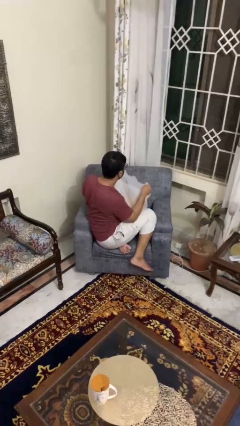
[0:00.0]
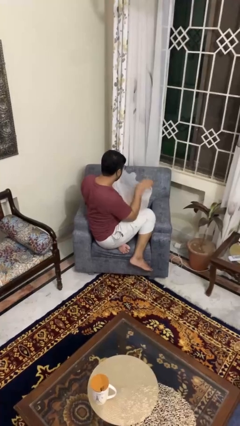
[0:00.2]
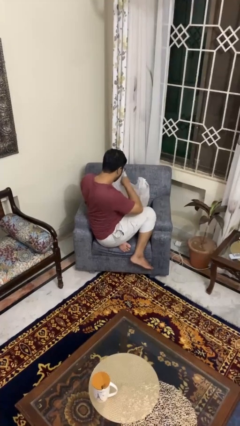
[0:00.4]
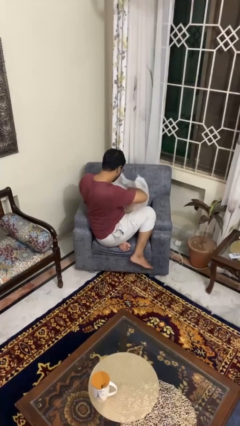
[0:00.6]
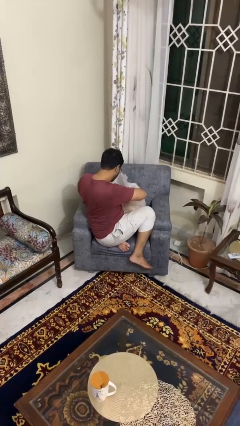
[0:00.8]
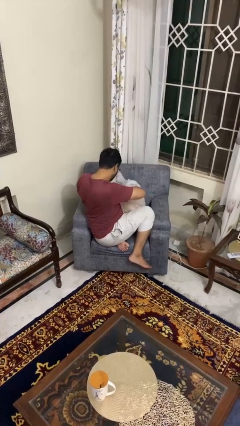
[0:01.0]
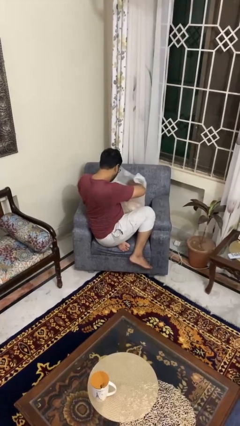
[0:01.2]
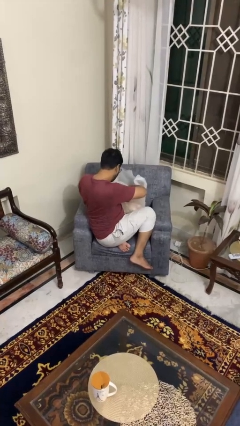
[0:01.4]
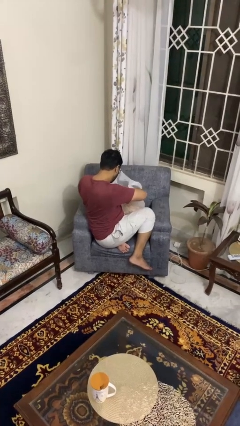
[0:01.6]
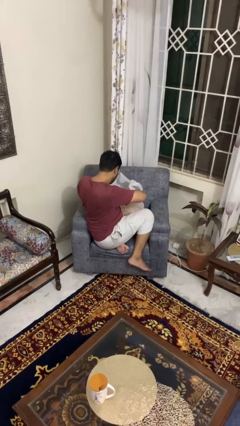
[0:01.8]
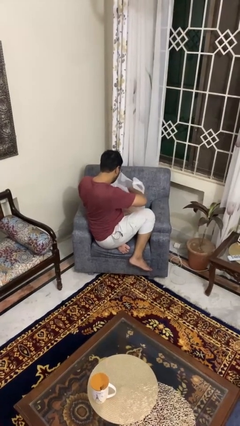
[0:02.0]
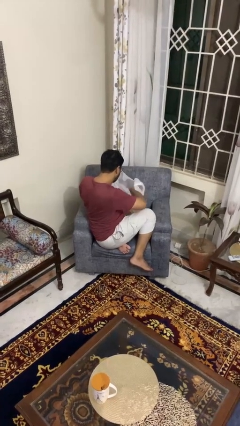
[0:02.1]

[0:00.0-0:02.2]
person searches in bag

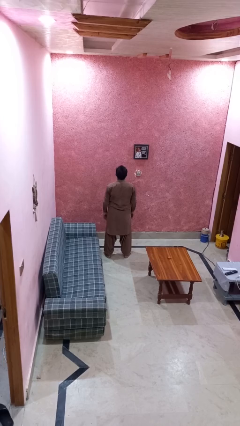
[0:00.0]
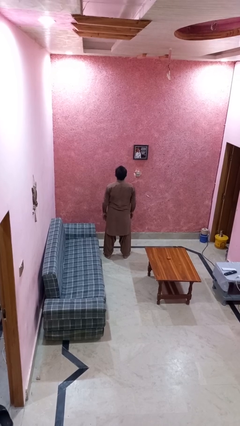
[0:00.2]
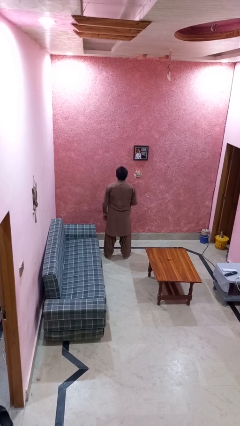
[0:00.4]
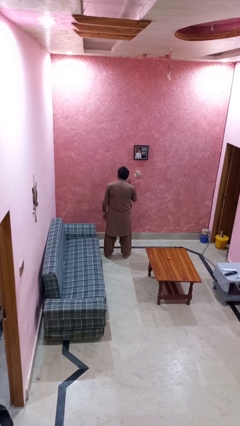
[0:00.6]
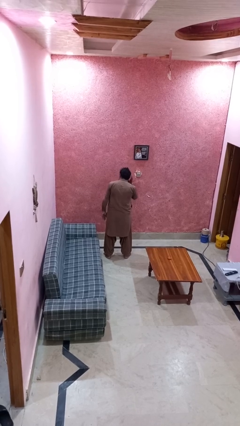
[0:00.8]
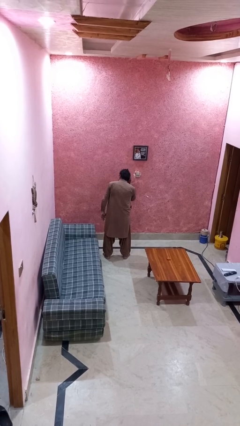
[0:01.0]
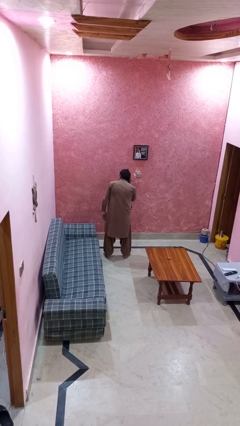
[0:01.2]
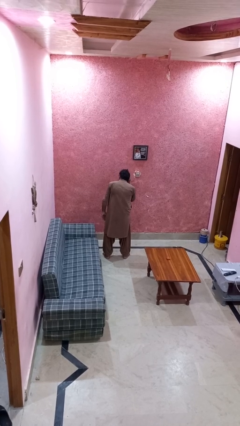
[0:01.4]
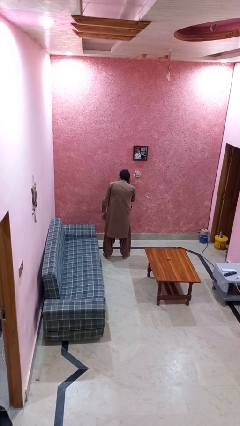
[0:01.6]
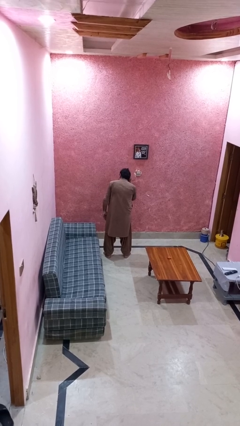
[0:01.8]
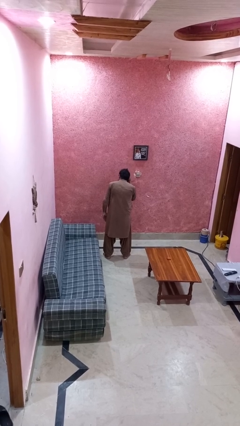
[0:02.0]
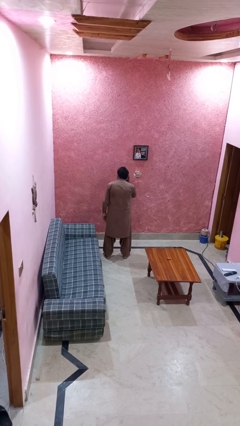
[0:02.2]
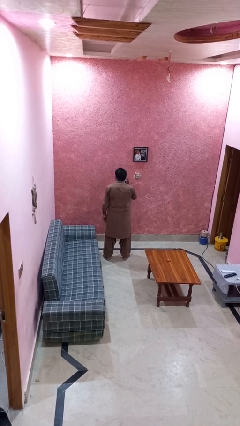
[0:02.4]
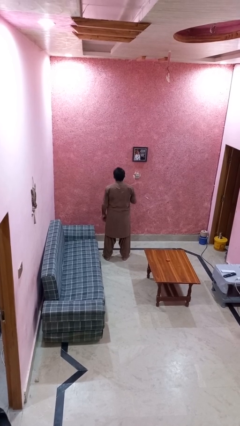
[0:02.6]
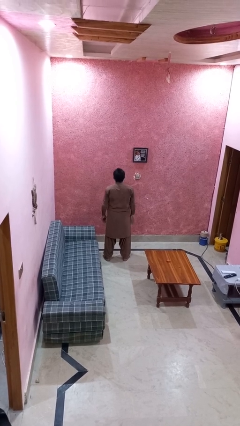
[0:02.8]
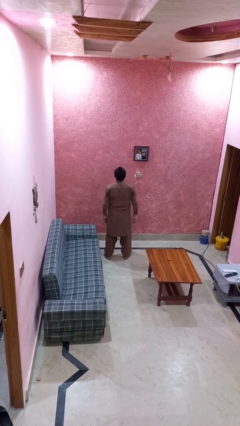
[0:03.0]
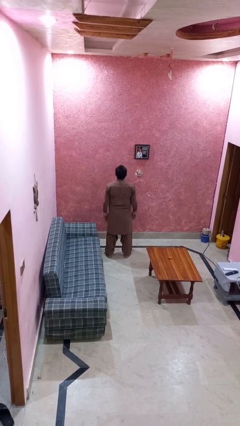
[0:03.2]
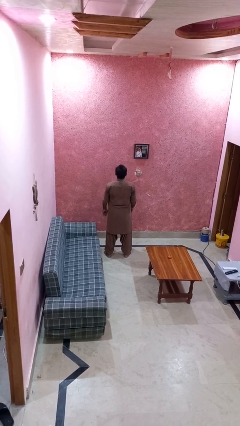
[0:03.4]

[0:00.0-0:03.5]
person gestures listen closely

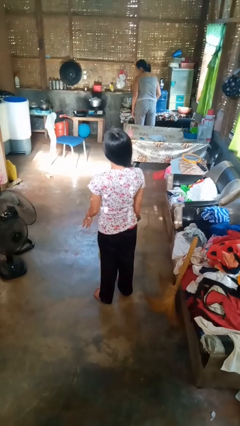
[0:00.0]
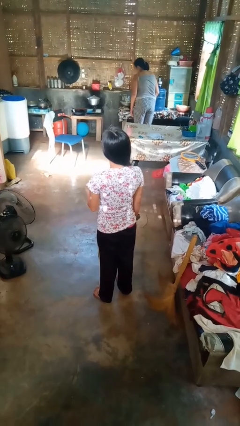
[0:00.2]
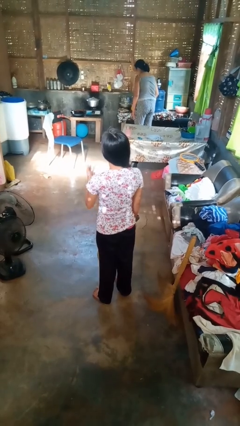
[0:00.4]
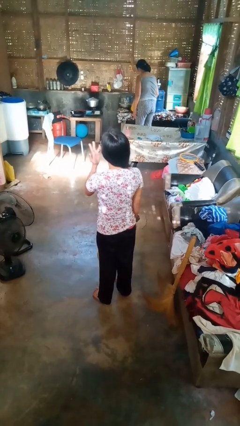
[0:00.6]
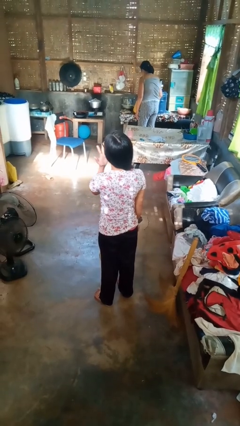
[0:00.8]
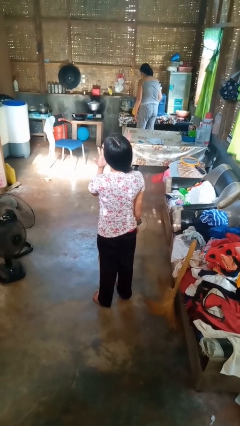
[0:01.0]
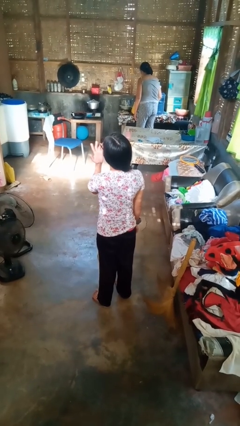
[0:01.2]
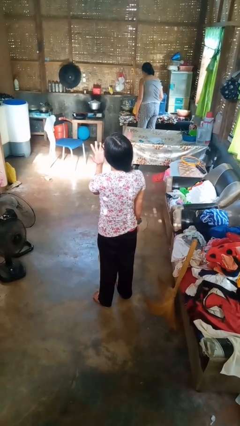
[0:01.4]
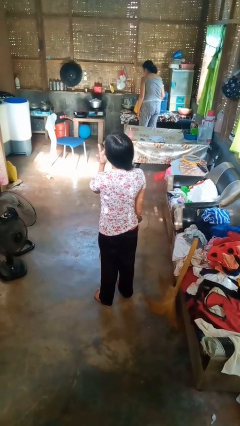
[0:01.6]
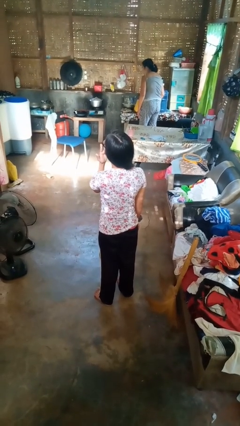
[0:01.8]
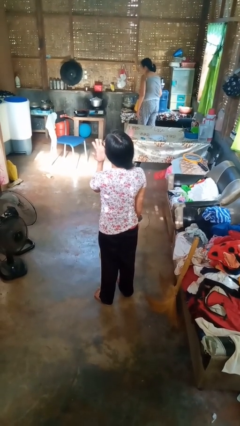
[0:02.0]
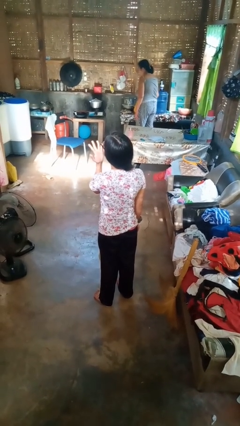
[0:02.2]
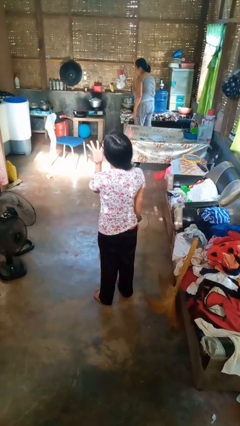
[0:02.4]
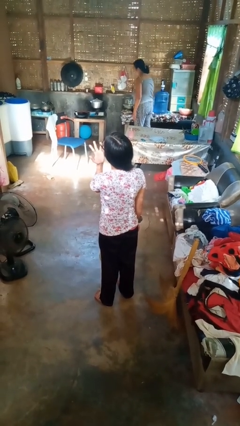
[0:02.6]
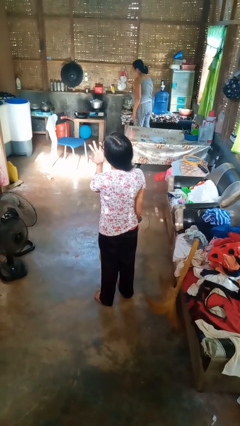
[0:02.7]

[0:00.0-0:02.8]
person licks fingers

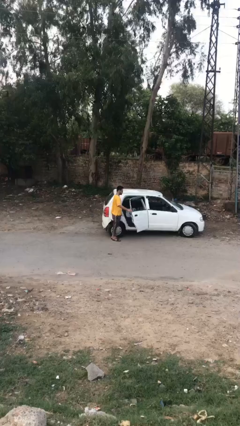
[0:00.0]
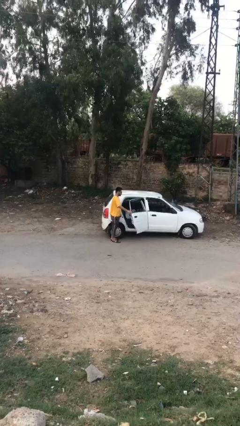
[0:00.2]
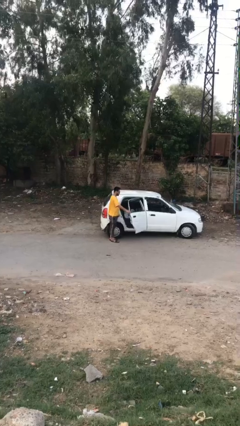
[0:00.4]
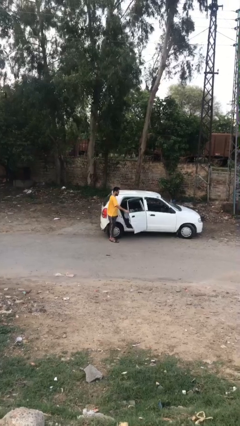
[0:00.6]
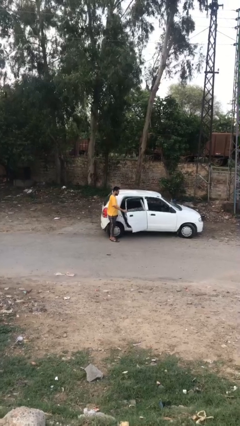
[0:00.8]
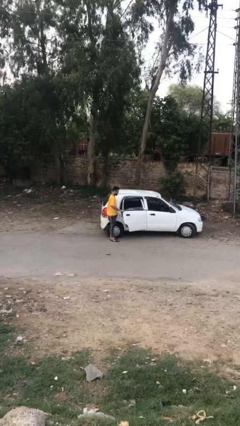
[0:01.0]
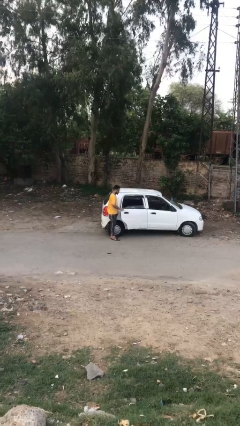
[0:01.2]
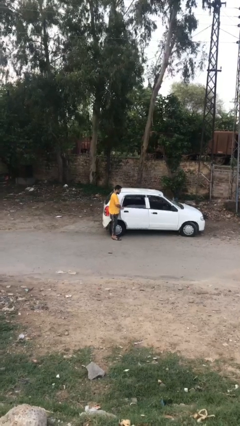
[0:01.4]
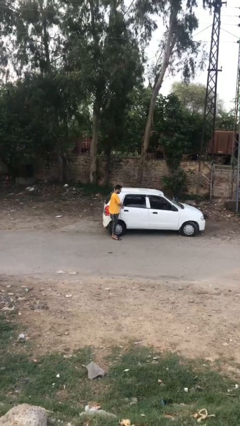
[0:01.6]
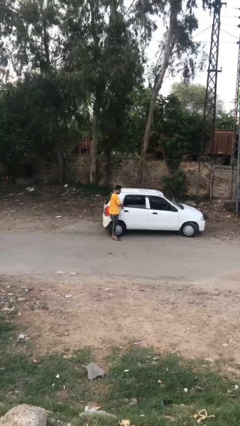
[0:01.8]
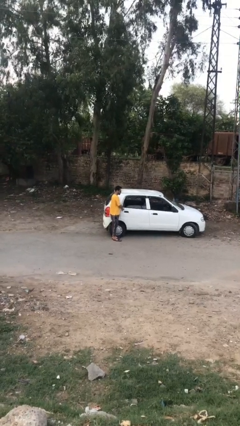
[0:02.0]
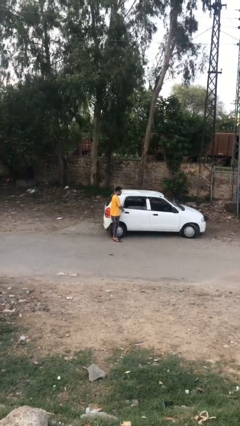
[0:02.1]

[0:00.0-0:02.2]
person closes car door

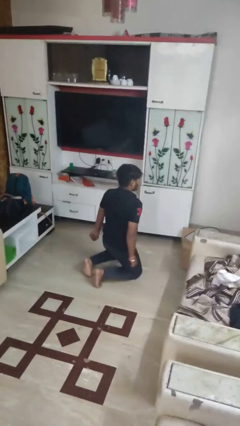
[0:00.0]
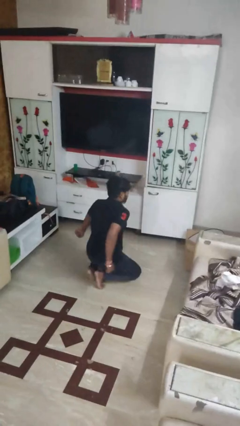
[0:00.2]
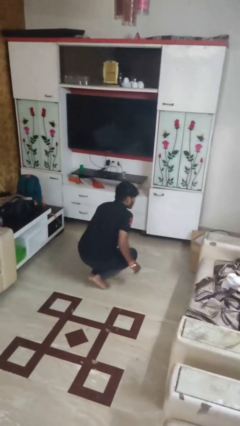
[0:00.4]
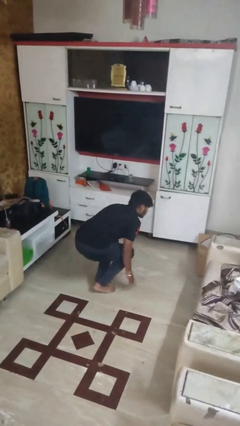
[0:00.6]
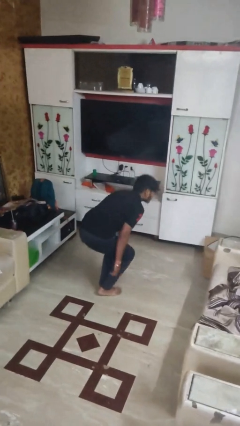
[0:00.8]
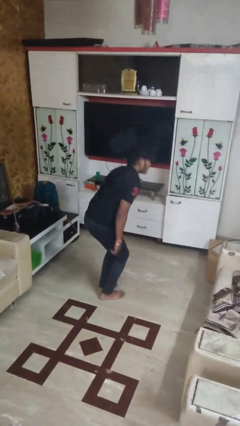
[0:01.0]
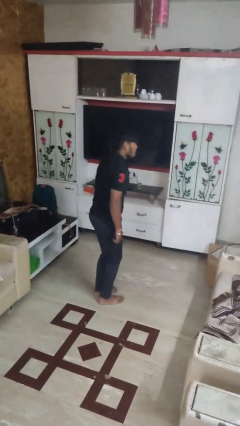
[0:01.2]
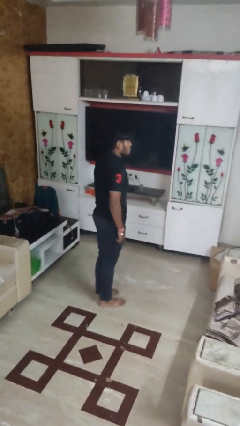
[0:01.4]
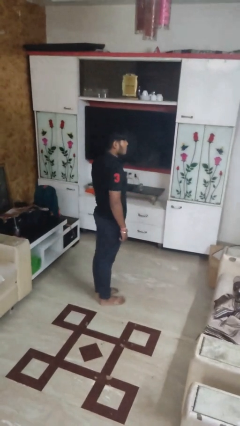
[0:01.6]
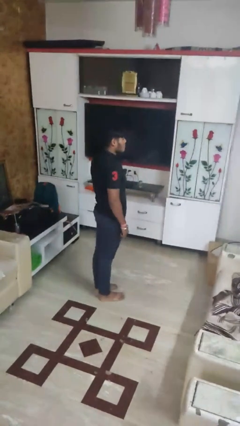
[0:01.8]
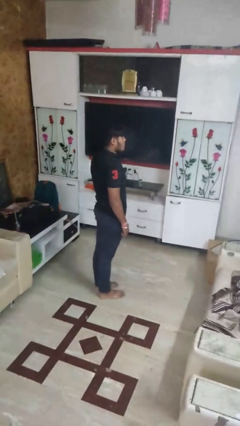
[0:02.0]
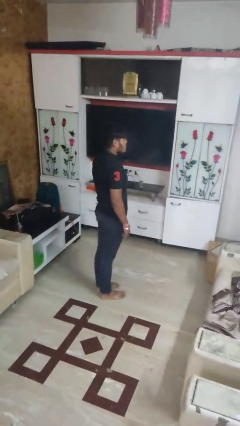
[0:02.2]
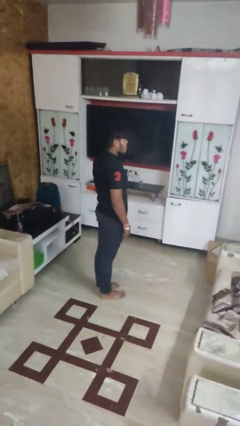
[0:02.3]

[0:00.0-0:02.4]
person stands up from floor

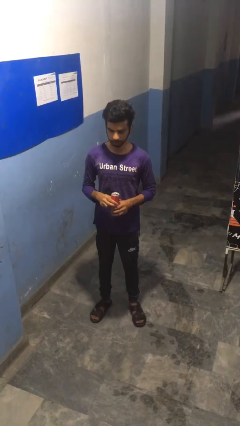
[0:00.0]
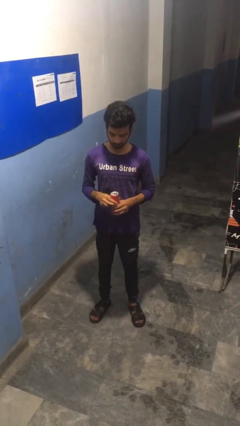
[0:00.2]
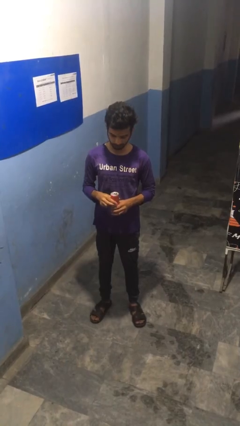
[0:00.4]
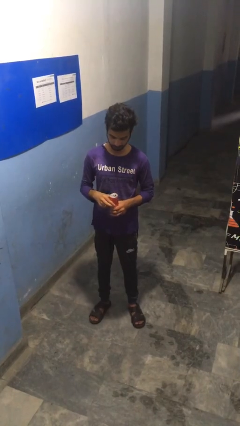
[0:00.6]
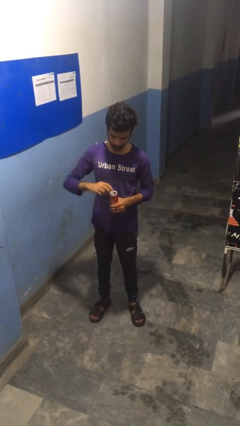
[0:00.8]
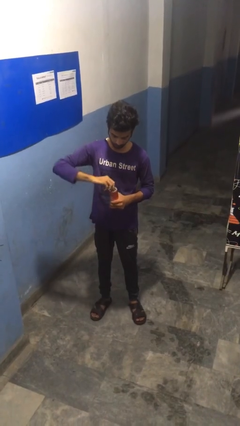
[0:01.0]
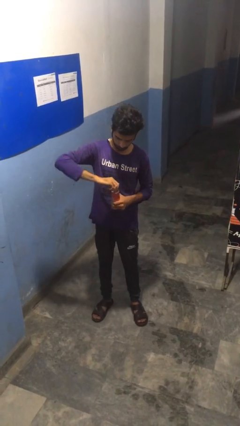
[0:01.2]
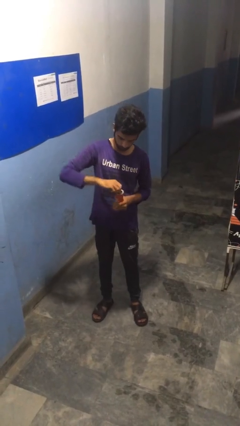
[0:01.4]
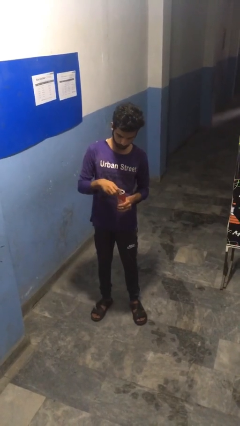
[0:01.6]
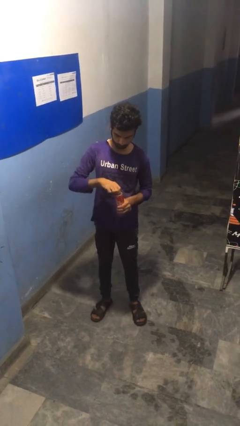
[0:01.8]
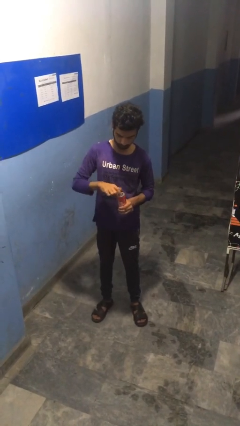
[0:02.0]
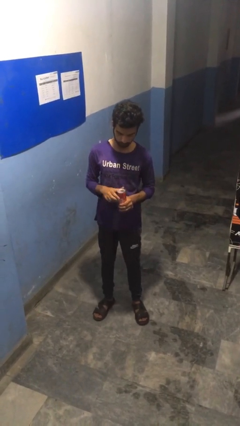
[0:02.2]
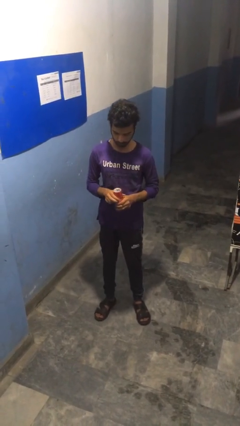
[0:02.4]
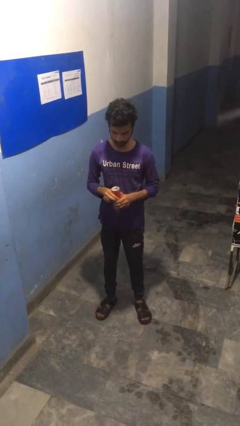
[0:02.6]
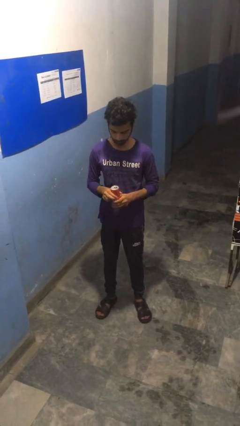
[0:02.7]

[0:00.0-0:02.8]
person opens beverage can

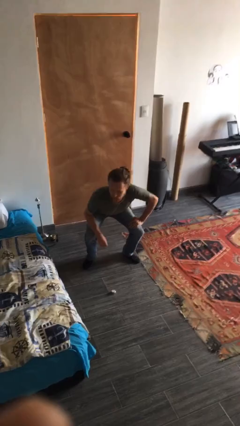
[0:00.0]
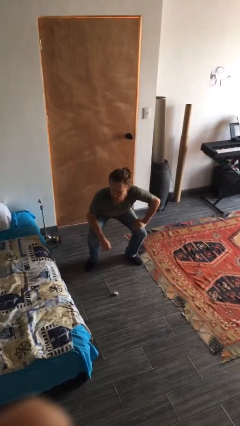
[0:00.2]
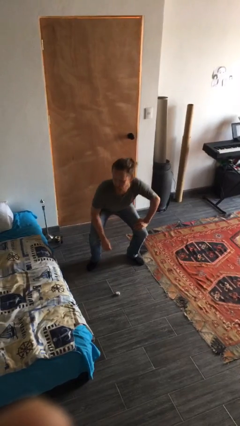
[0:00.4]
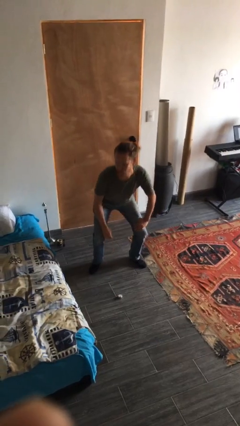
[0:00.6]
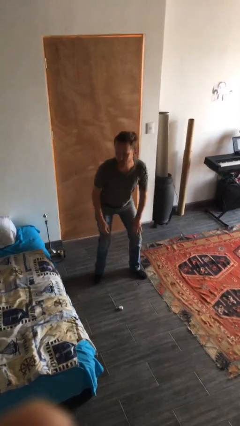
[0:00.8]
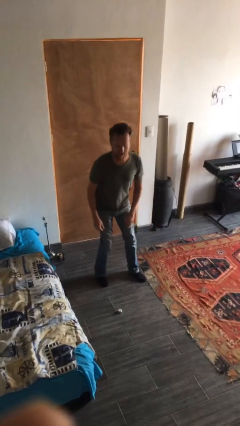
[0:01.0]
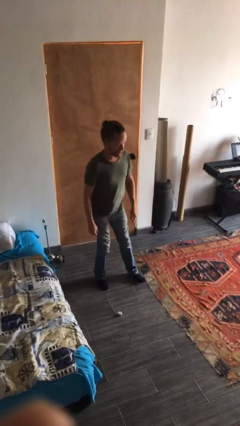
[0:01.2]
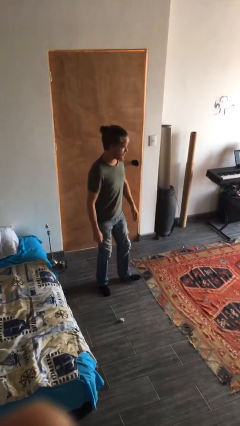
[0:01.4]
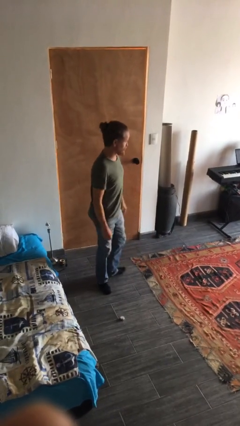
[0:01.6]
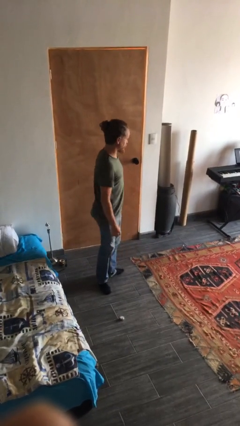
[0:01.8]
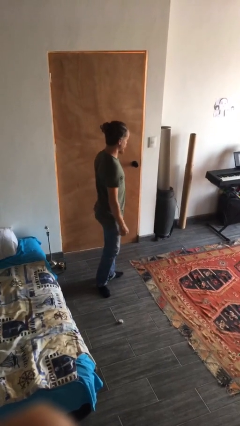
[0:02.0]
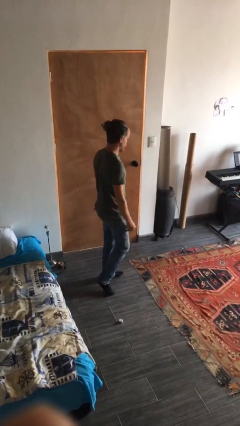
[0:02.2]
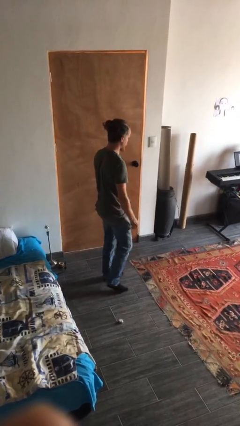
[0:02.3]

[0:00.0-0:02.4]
person stands up
